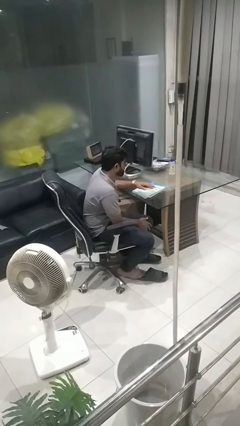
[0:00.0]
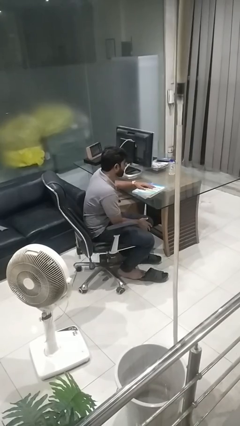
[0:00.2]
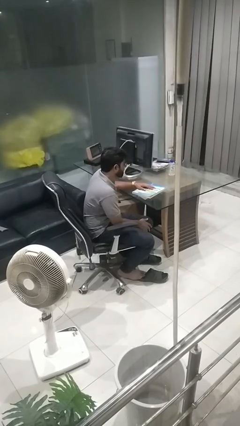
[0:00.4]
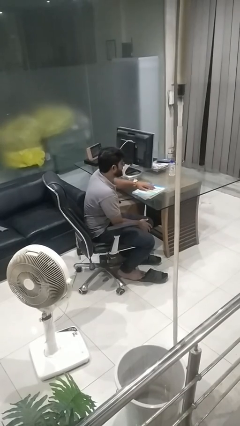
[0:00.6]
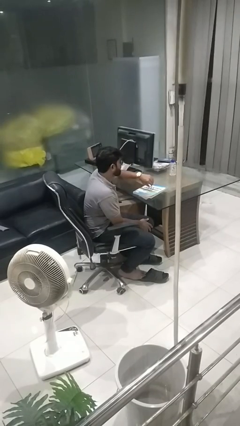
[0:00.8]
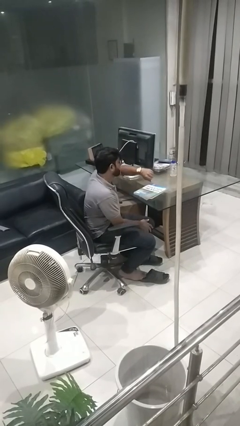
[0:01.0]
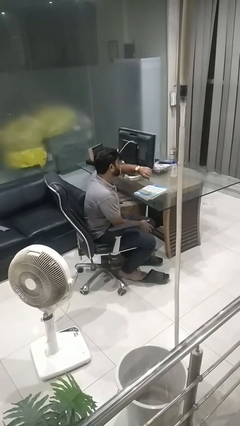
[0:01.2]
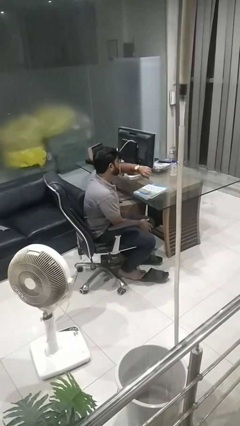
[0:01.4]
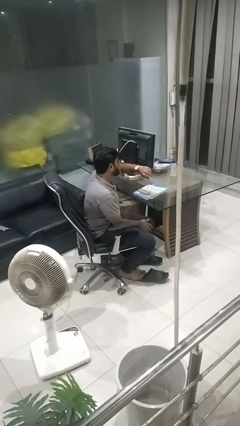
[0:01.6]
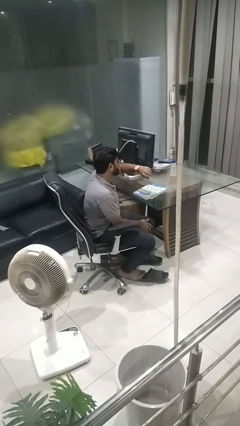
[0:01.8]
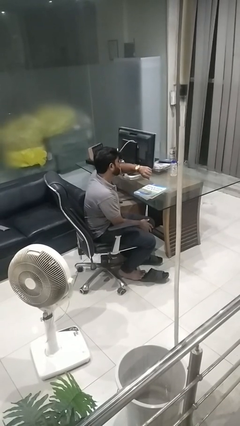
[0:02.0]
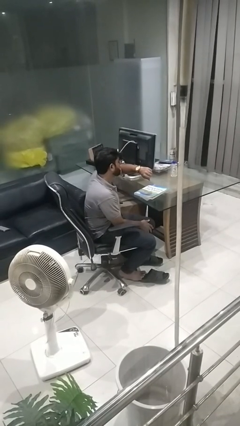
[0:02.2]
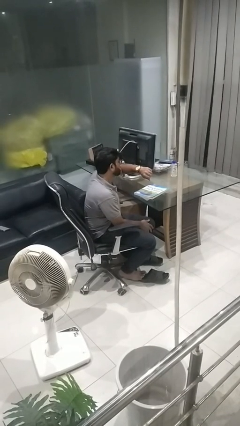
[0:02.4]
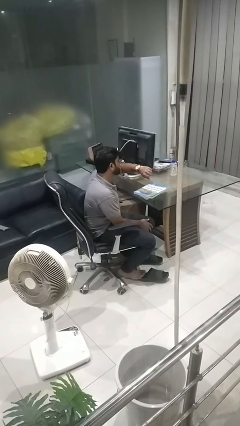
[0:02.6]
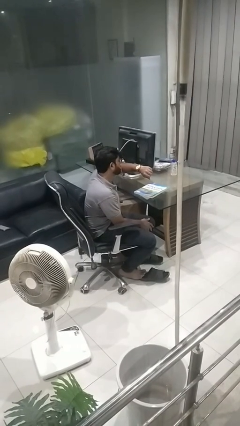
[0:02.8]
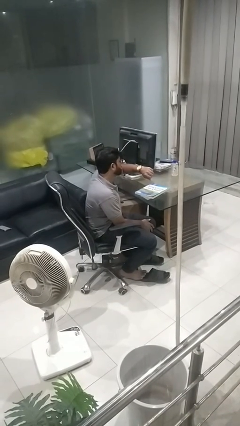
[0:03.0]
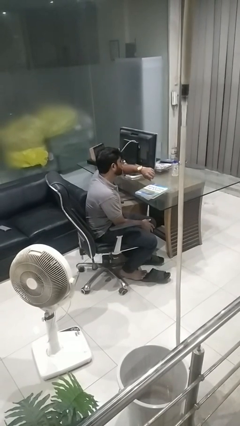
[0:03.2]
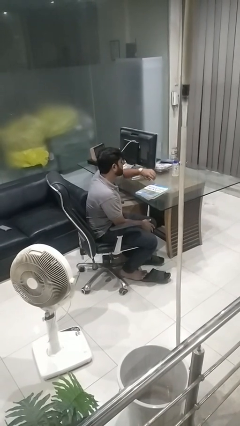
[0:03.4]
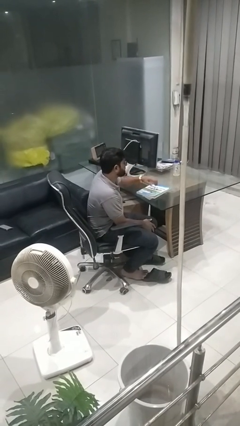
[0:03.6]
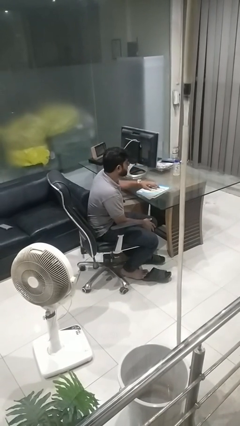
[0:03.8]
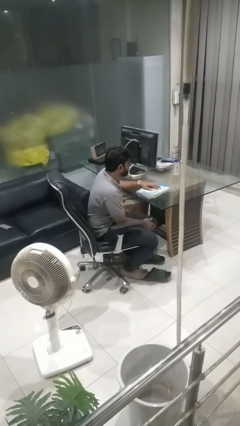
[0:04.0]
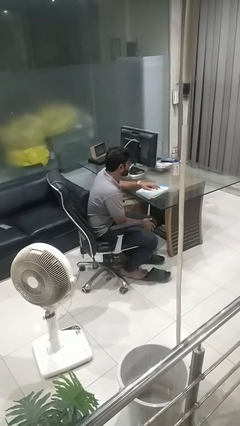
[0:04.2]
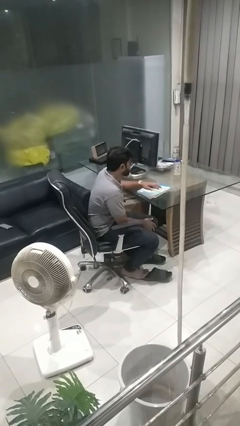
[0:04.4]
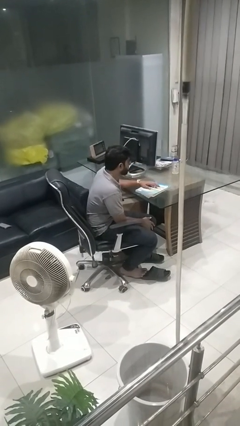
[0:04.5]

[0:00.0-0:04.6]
person looks at wristwatch

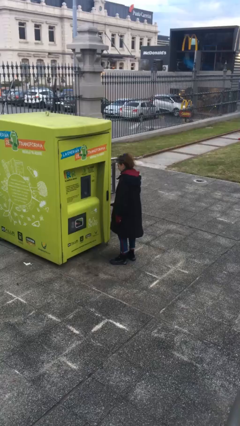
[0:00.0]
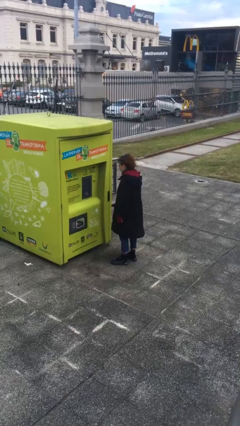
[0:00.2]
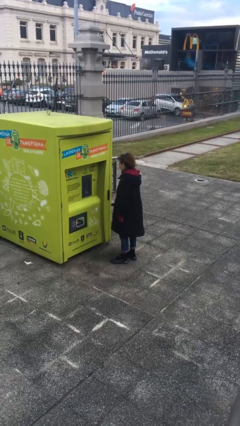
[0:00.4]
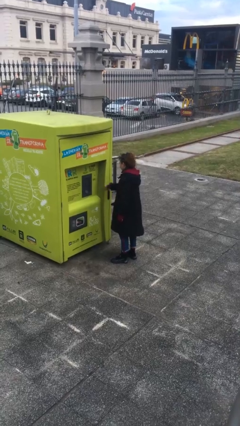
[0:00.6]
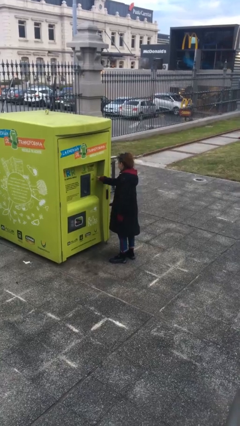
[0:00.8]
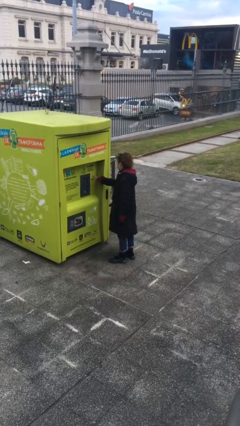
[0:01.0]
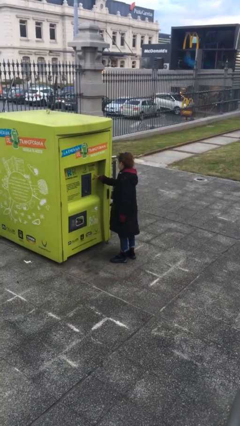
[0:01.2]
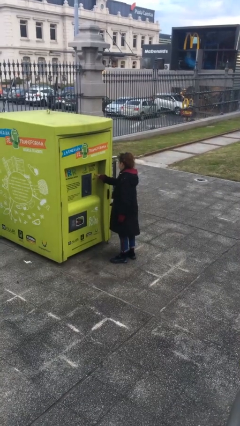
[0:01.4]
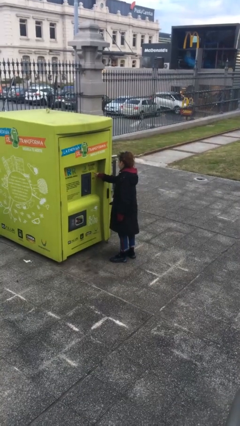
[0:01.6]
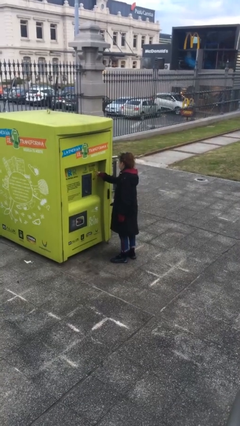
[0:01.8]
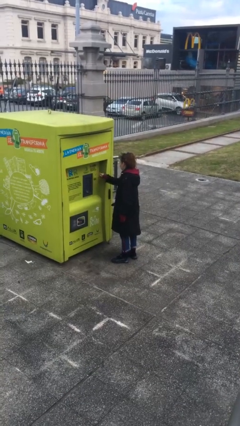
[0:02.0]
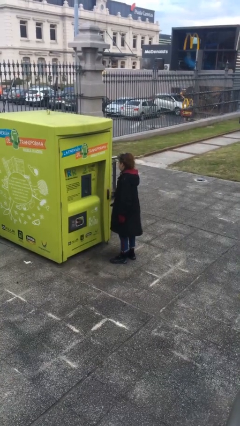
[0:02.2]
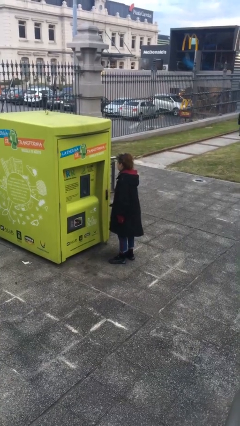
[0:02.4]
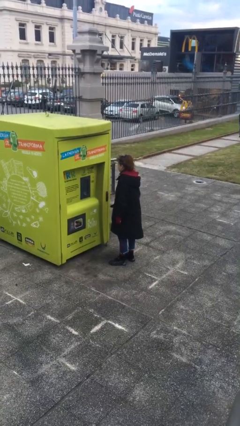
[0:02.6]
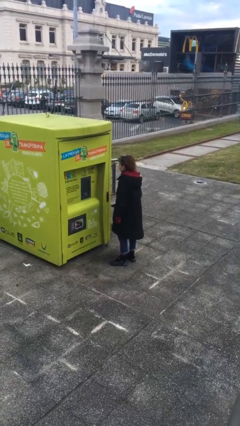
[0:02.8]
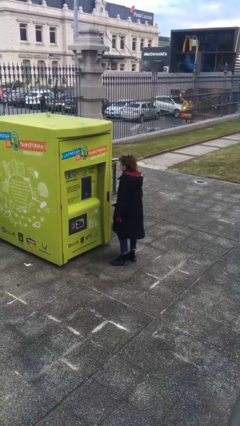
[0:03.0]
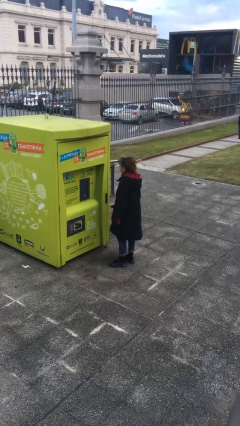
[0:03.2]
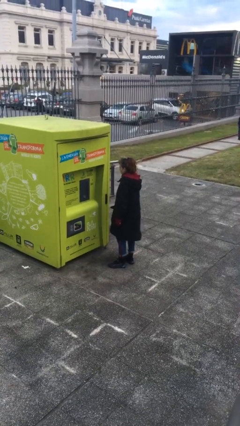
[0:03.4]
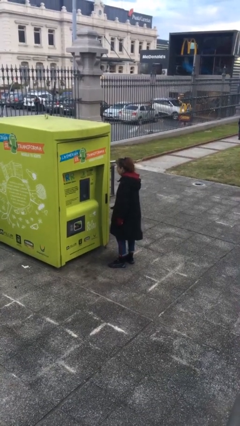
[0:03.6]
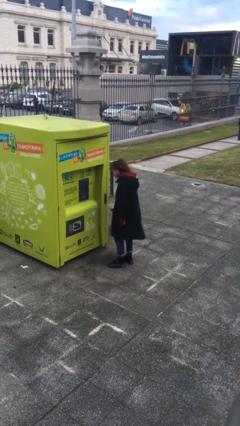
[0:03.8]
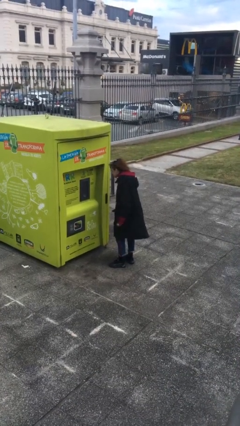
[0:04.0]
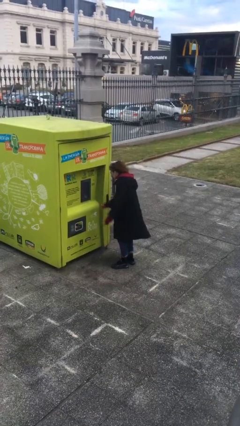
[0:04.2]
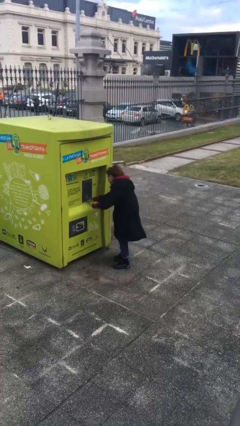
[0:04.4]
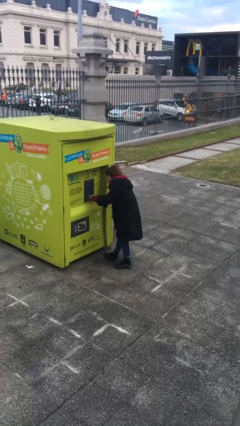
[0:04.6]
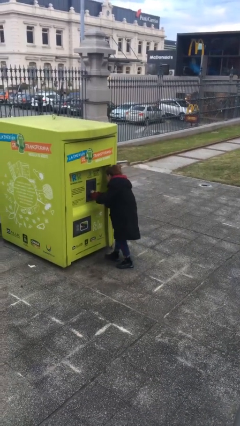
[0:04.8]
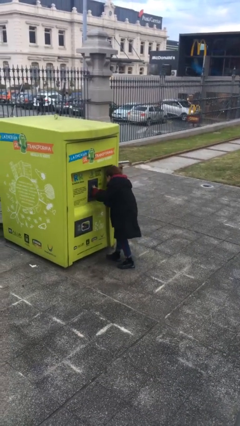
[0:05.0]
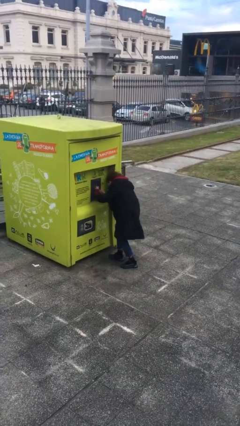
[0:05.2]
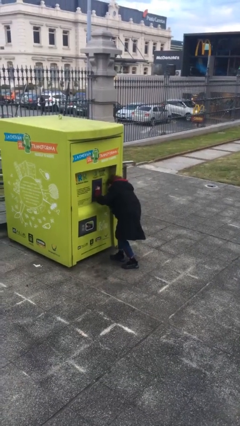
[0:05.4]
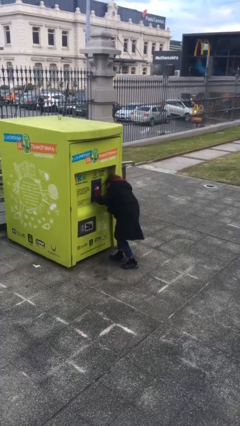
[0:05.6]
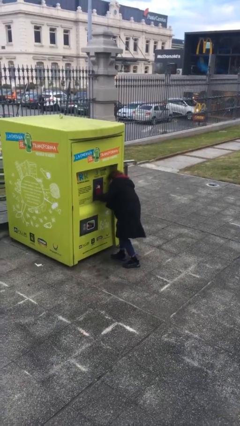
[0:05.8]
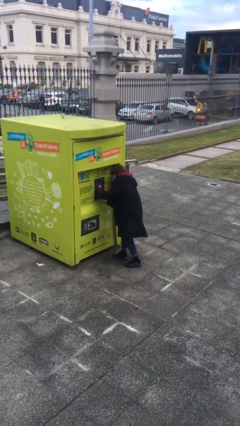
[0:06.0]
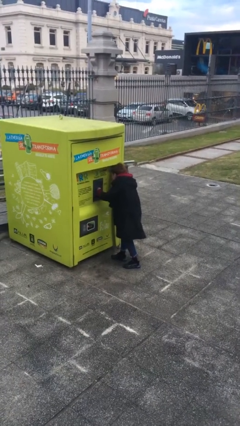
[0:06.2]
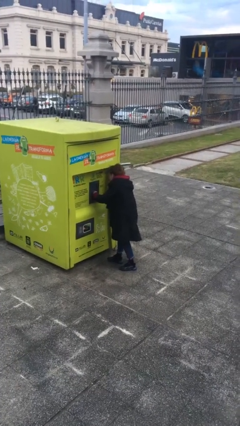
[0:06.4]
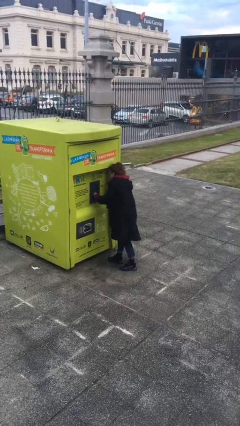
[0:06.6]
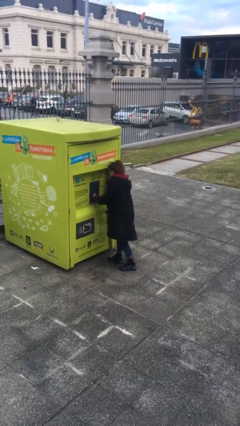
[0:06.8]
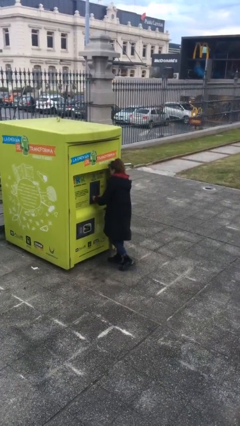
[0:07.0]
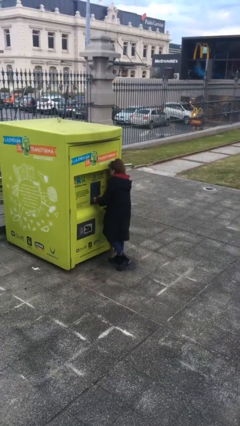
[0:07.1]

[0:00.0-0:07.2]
person purchases from machine

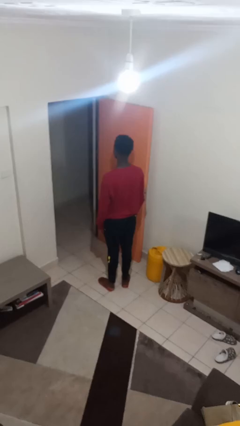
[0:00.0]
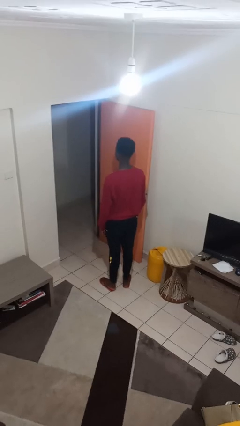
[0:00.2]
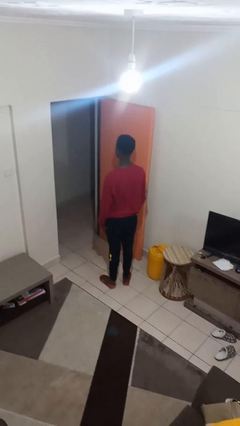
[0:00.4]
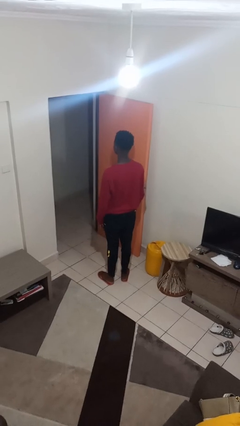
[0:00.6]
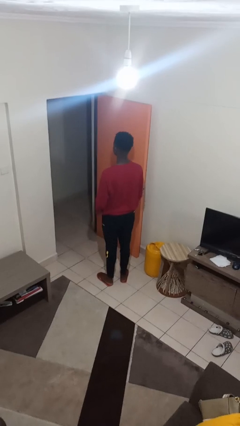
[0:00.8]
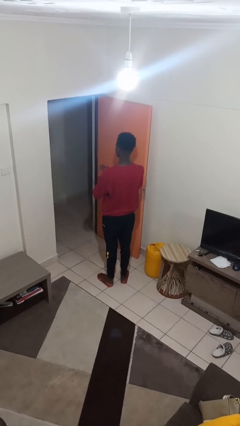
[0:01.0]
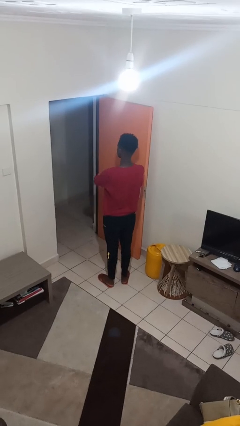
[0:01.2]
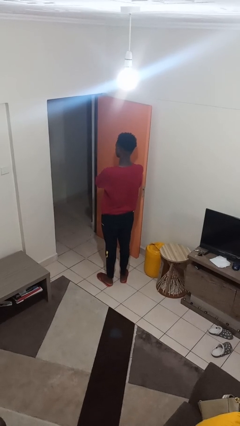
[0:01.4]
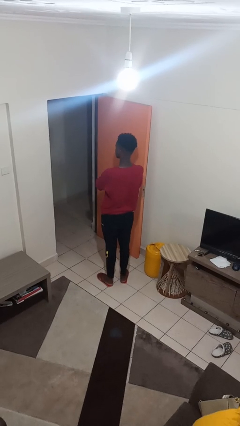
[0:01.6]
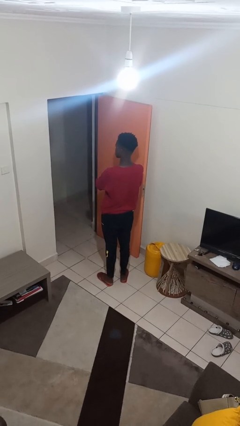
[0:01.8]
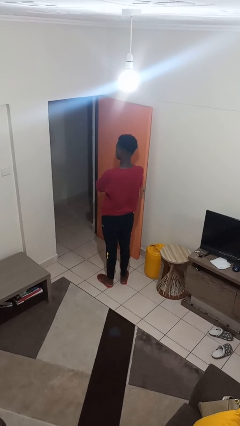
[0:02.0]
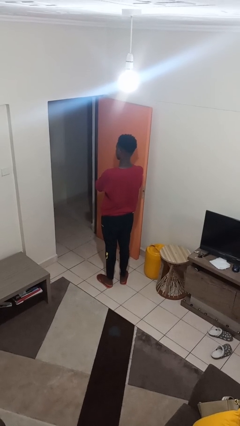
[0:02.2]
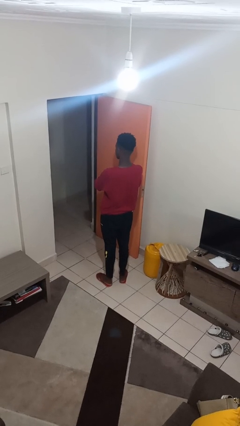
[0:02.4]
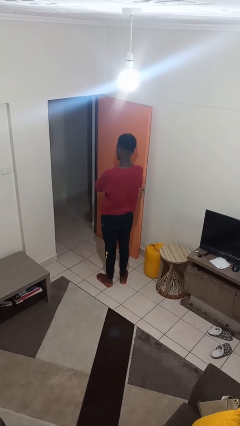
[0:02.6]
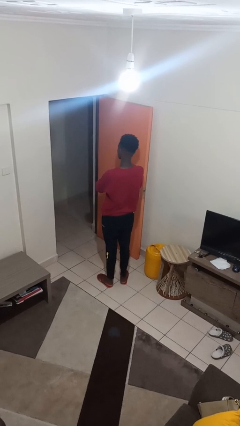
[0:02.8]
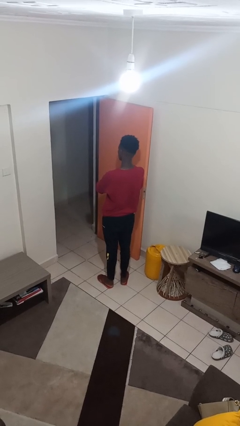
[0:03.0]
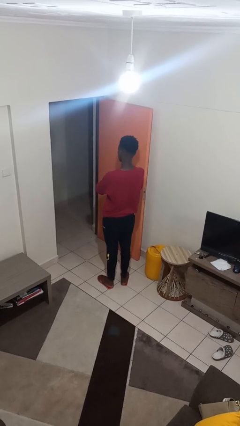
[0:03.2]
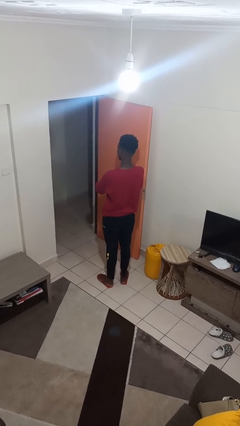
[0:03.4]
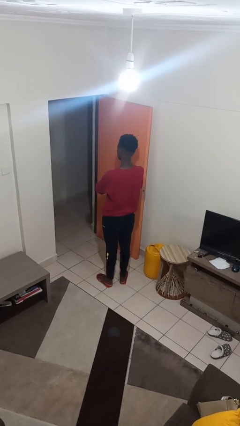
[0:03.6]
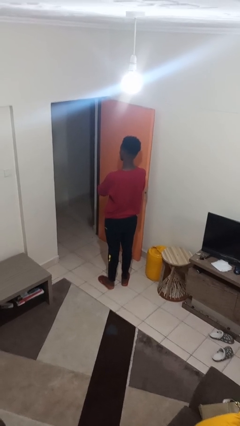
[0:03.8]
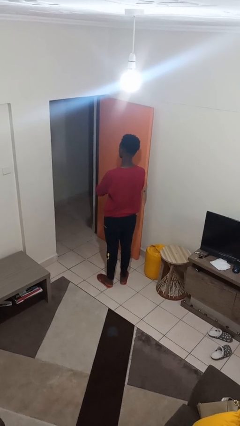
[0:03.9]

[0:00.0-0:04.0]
person crosses arms

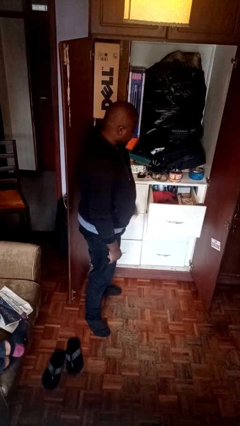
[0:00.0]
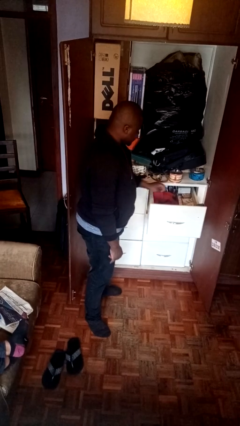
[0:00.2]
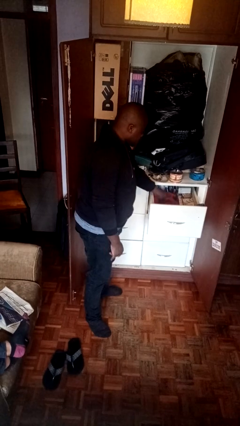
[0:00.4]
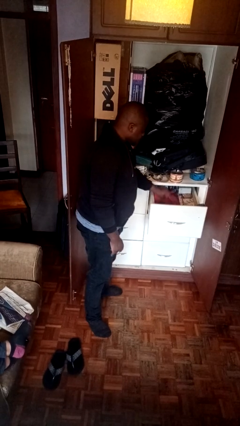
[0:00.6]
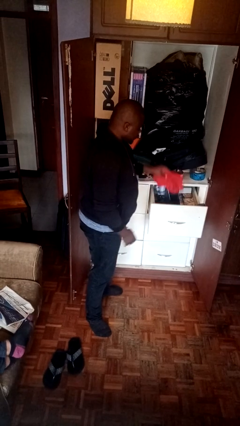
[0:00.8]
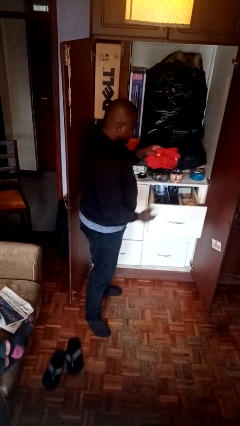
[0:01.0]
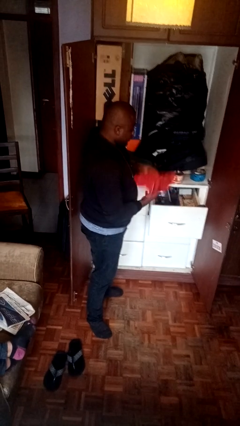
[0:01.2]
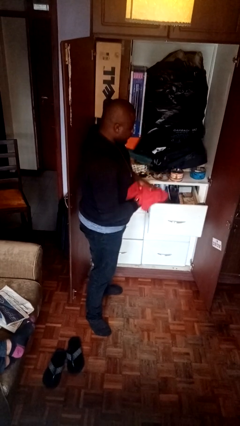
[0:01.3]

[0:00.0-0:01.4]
person takes clothes from dresser

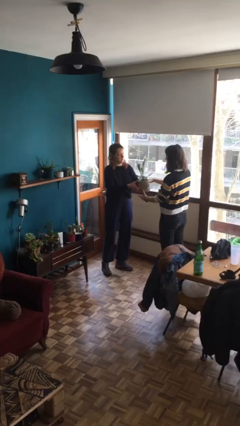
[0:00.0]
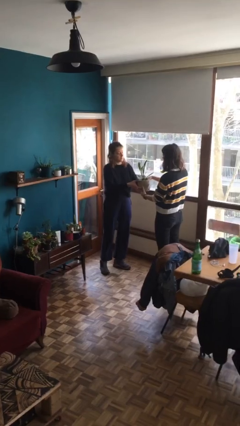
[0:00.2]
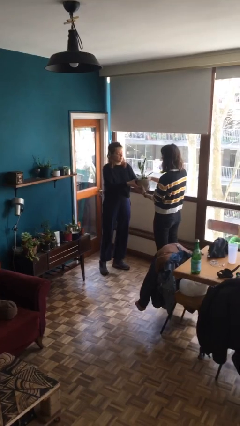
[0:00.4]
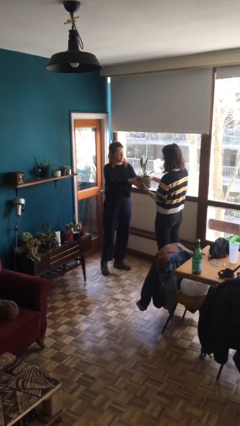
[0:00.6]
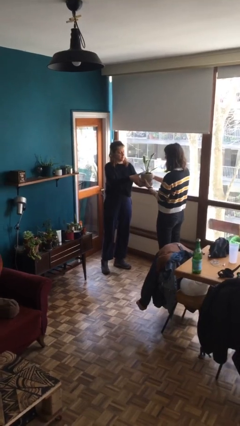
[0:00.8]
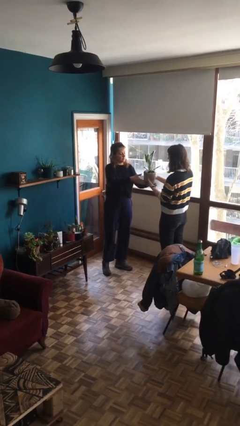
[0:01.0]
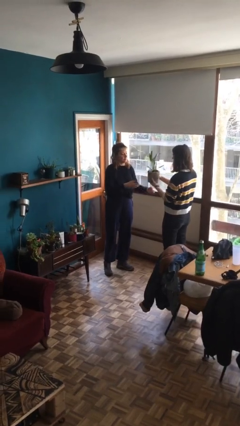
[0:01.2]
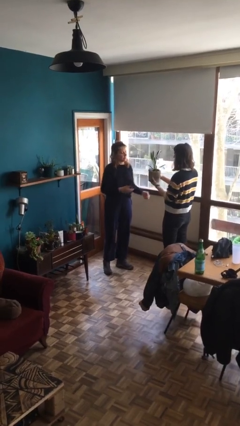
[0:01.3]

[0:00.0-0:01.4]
person transfers object to person
